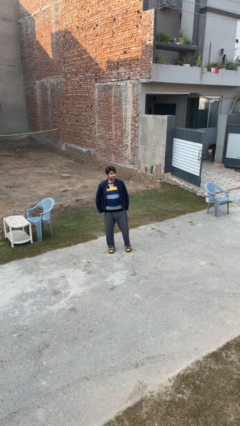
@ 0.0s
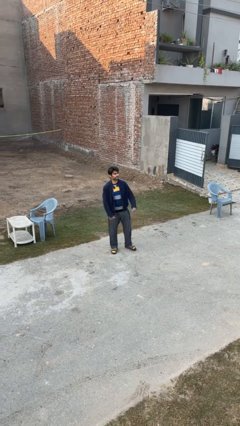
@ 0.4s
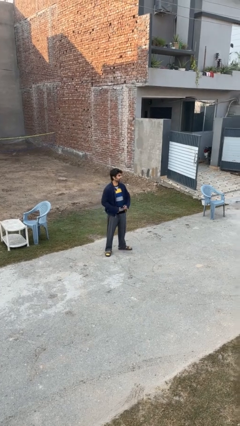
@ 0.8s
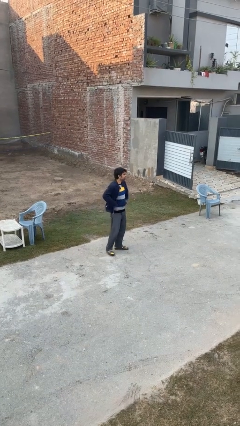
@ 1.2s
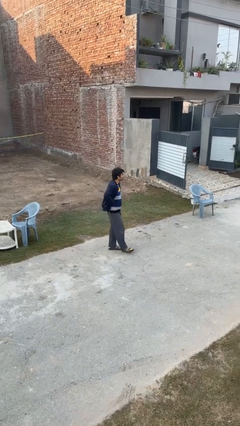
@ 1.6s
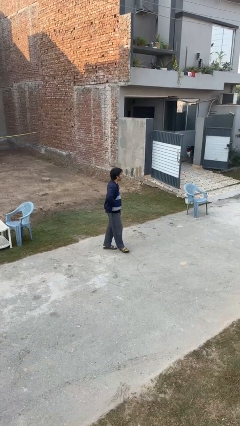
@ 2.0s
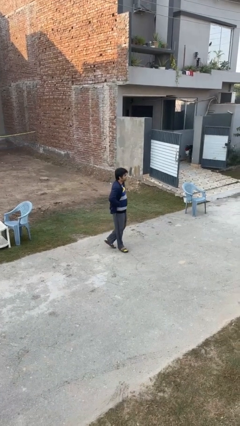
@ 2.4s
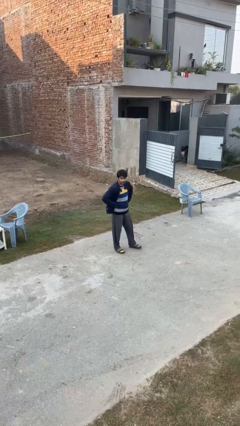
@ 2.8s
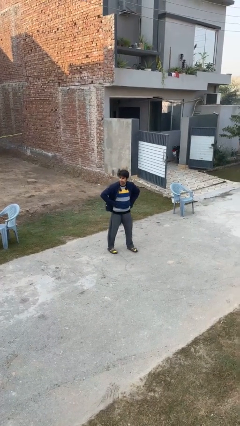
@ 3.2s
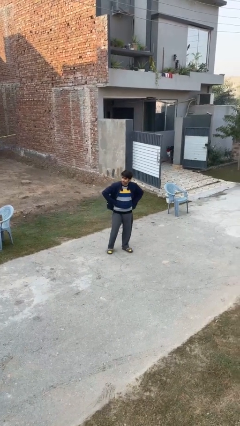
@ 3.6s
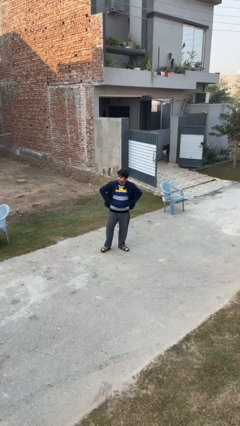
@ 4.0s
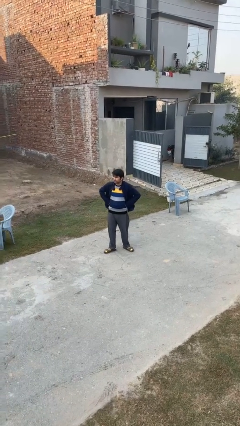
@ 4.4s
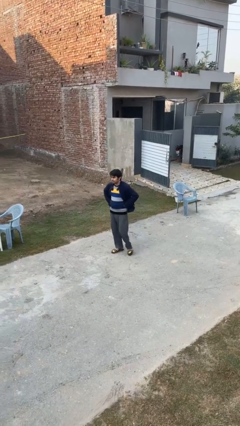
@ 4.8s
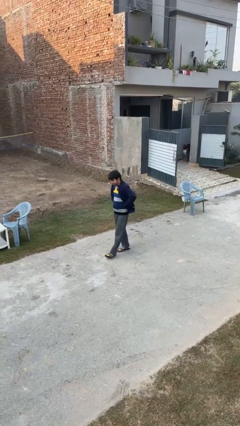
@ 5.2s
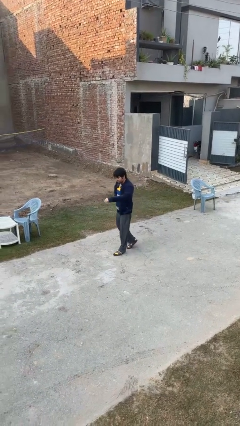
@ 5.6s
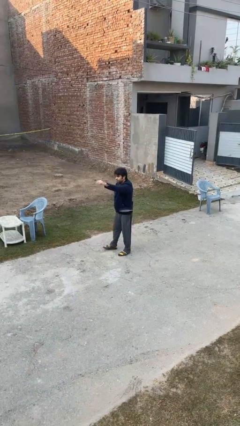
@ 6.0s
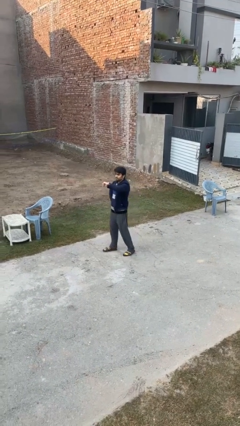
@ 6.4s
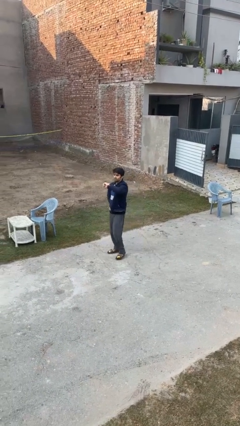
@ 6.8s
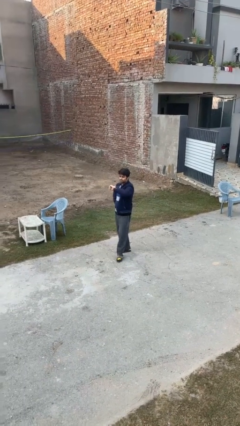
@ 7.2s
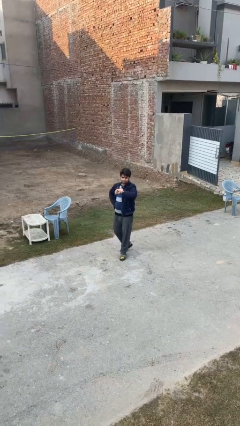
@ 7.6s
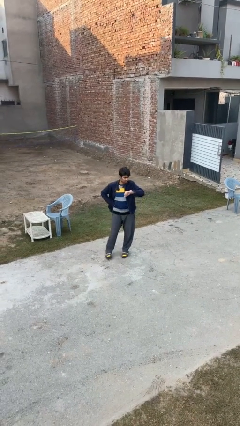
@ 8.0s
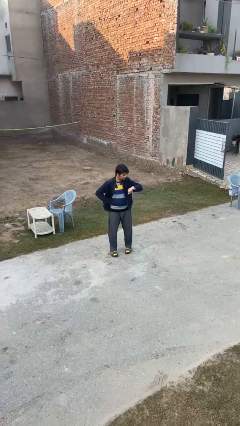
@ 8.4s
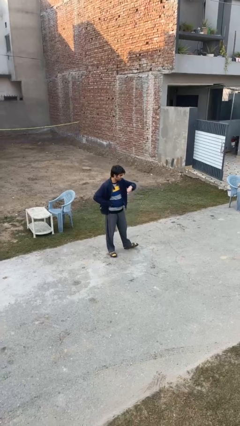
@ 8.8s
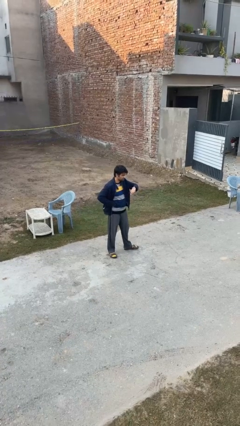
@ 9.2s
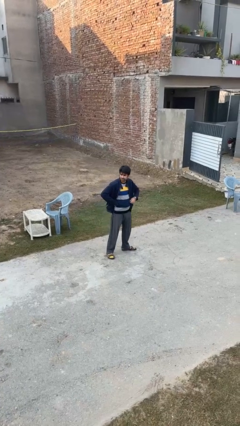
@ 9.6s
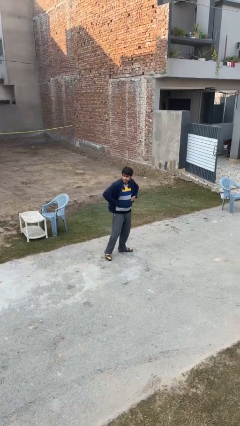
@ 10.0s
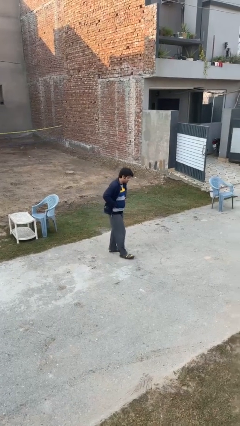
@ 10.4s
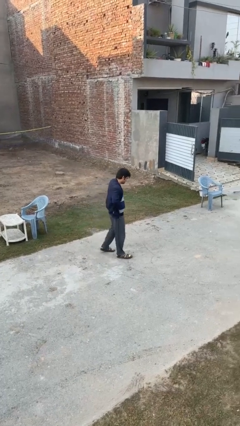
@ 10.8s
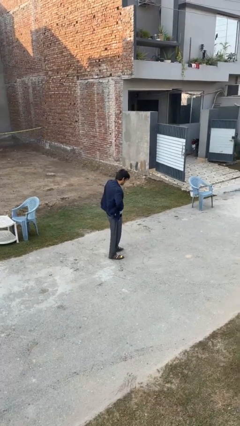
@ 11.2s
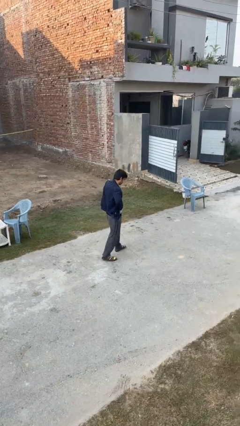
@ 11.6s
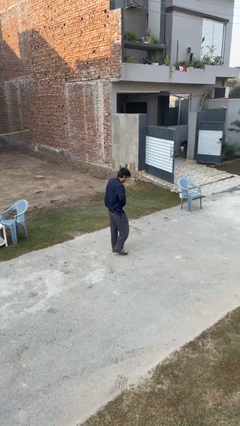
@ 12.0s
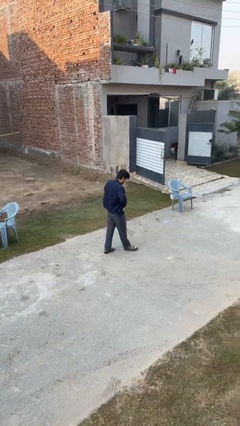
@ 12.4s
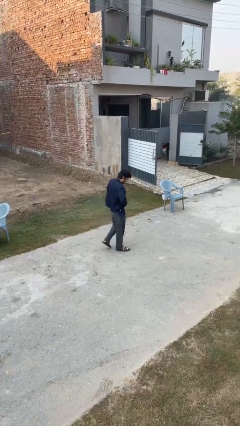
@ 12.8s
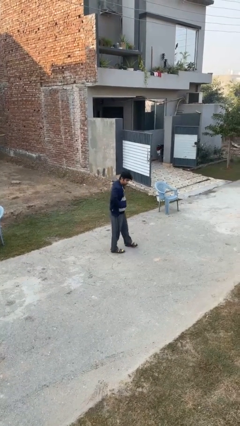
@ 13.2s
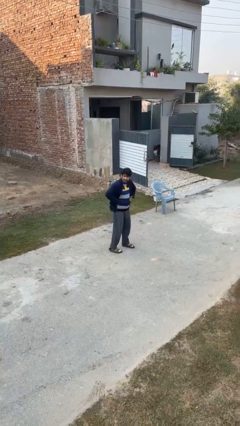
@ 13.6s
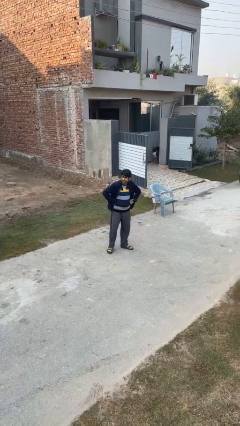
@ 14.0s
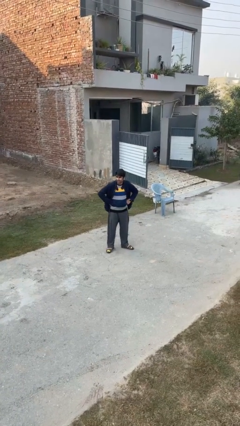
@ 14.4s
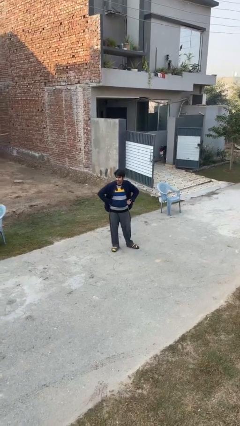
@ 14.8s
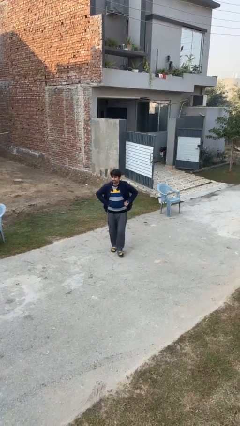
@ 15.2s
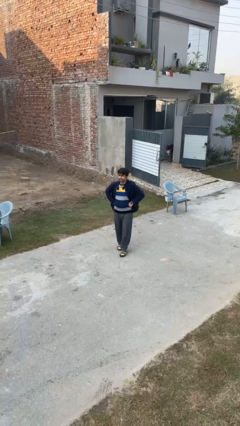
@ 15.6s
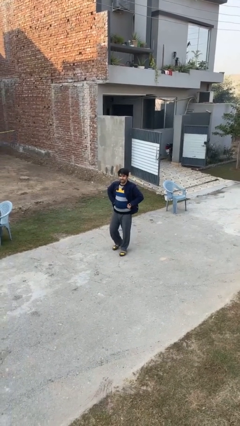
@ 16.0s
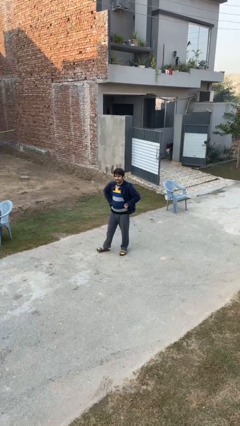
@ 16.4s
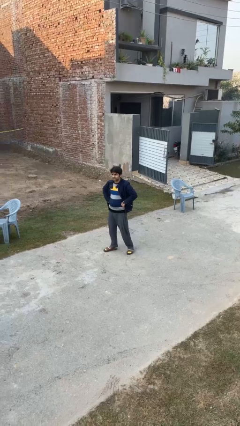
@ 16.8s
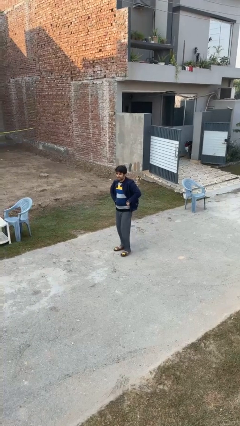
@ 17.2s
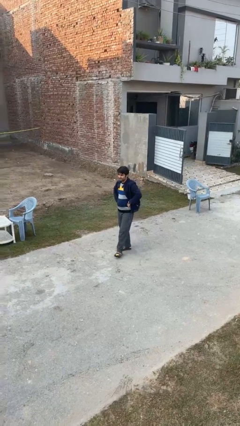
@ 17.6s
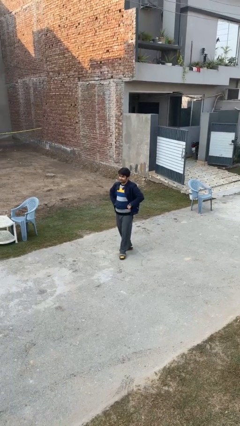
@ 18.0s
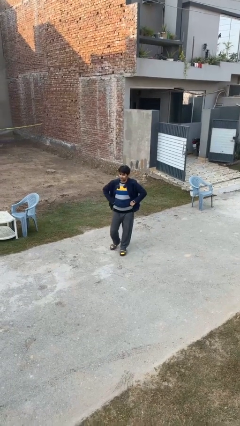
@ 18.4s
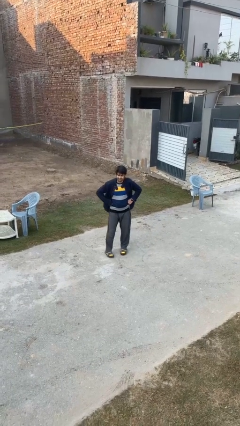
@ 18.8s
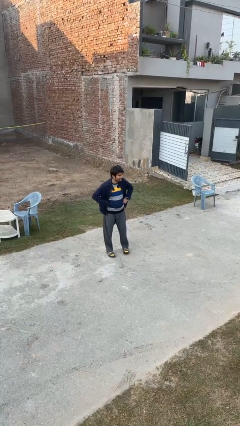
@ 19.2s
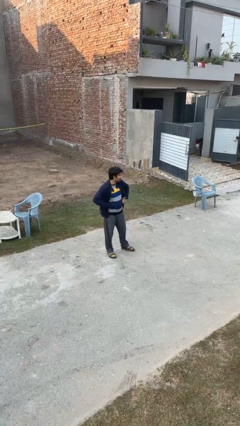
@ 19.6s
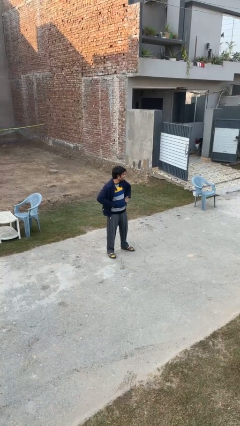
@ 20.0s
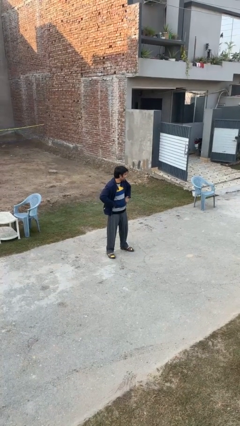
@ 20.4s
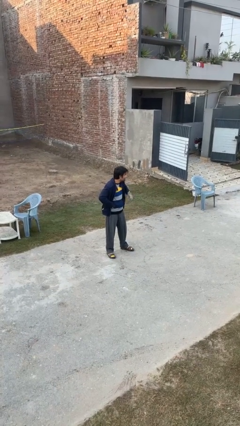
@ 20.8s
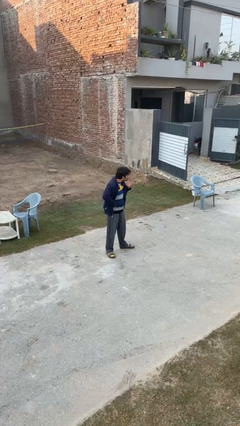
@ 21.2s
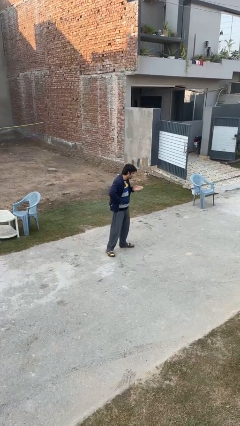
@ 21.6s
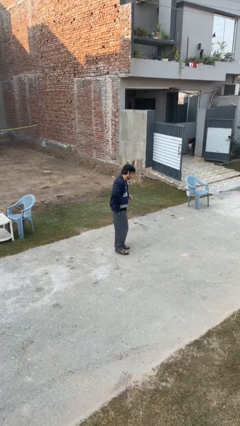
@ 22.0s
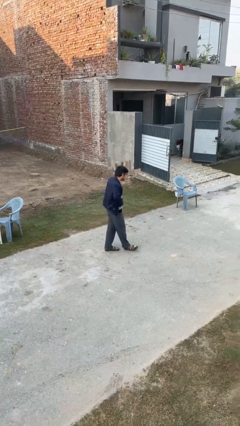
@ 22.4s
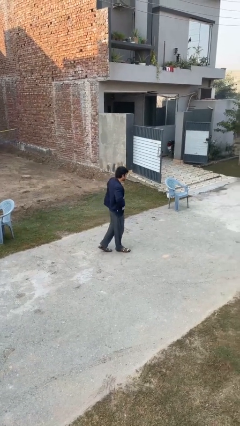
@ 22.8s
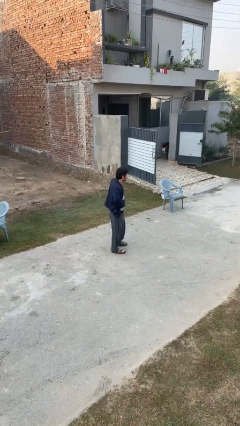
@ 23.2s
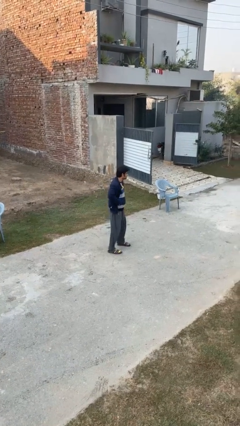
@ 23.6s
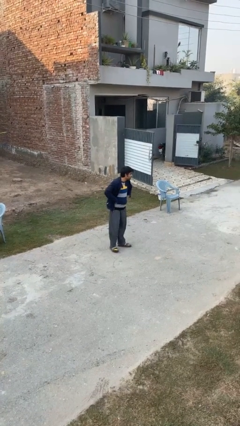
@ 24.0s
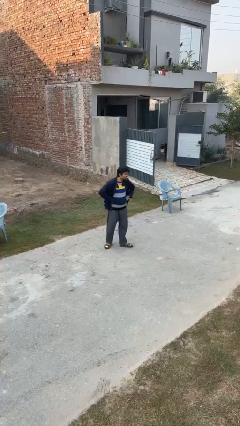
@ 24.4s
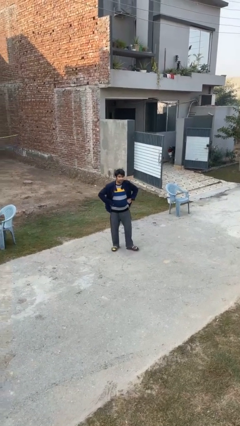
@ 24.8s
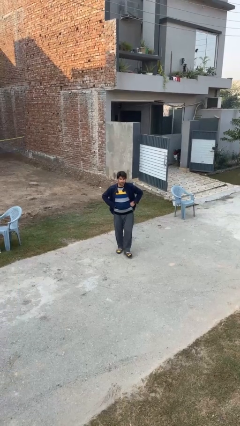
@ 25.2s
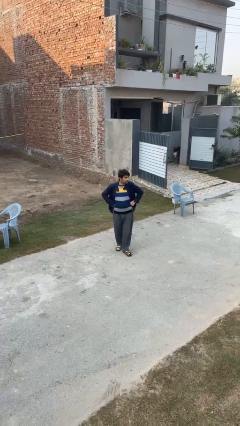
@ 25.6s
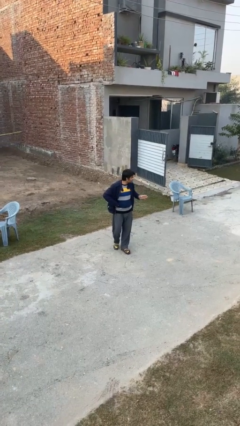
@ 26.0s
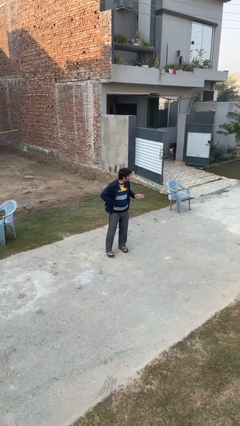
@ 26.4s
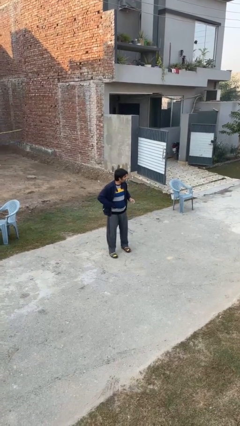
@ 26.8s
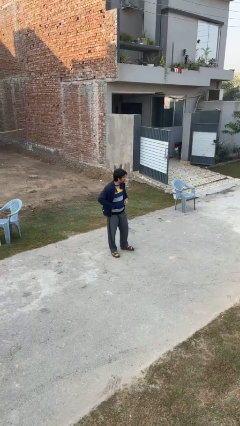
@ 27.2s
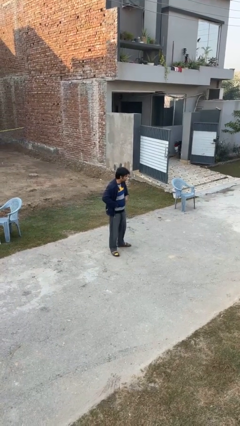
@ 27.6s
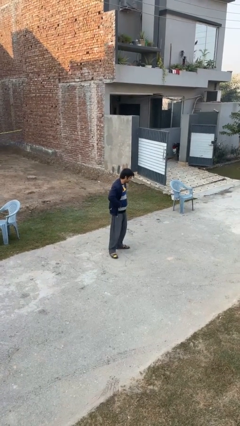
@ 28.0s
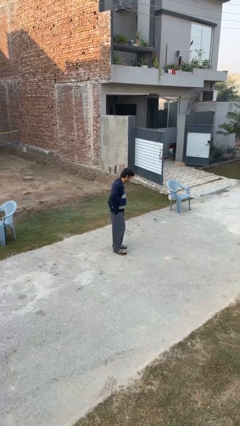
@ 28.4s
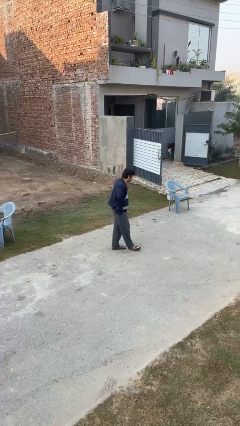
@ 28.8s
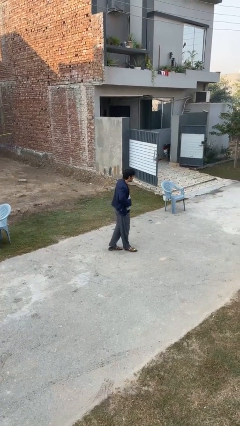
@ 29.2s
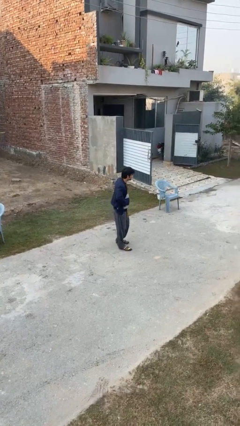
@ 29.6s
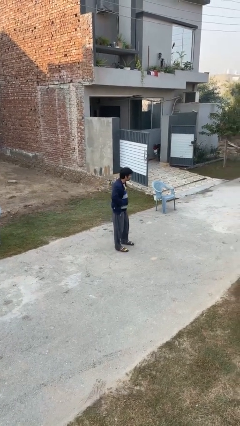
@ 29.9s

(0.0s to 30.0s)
person walks

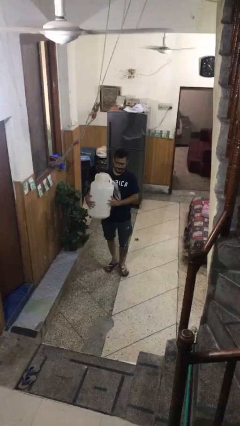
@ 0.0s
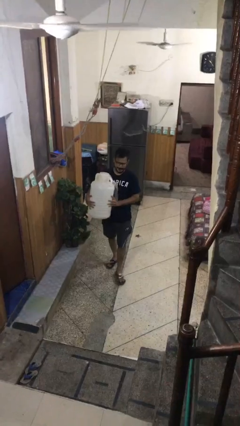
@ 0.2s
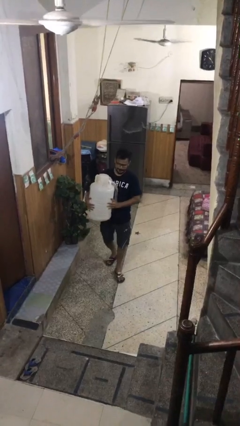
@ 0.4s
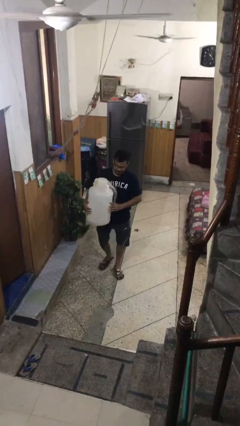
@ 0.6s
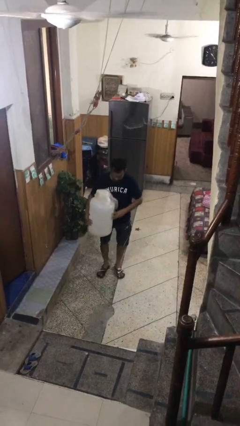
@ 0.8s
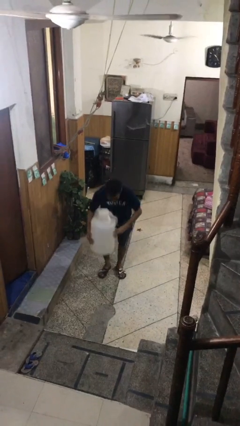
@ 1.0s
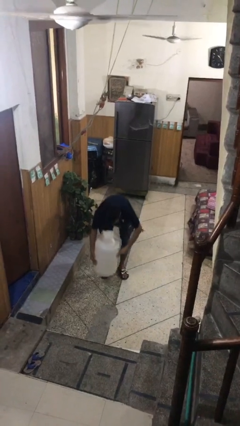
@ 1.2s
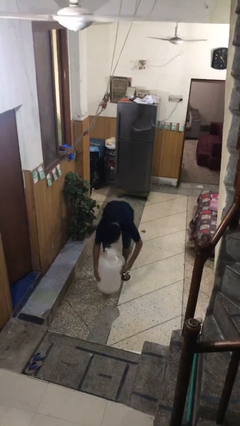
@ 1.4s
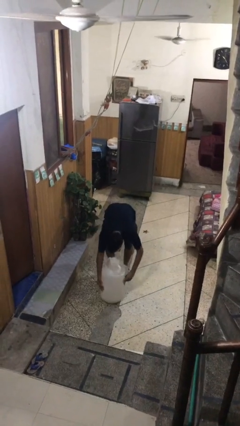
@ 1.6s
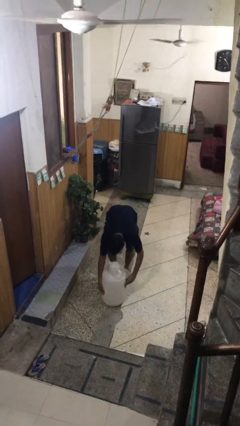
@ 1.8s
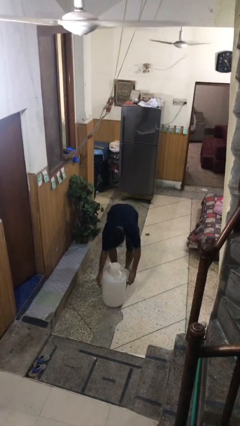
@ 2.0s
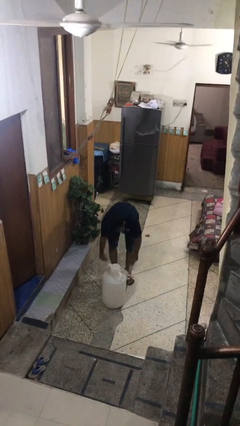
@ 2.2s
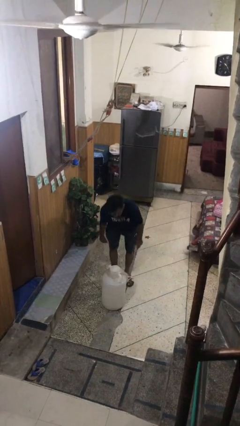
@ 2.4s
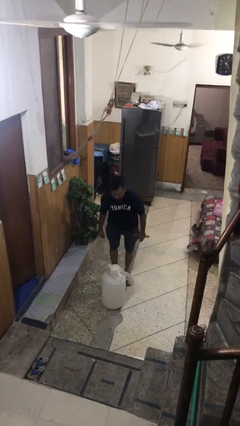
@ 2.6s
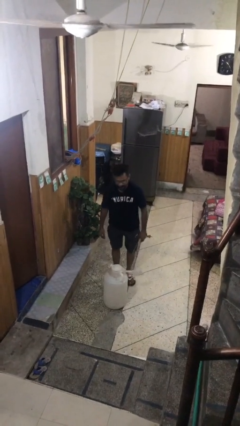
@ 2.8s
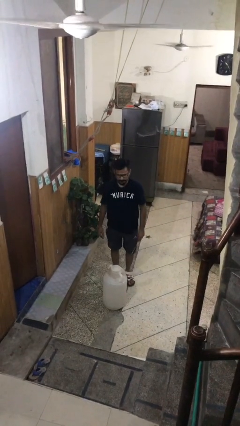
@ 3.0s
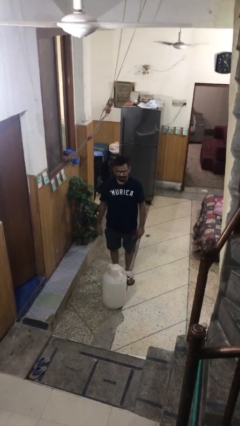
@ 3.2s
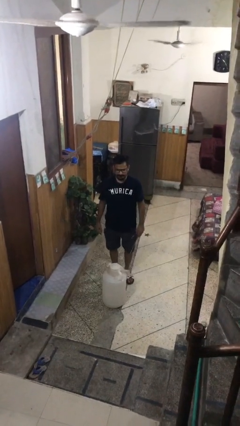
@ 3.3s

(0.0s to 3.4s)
person puts down object on floor
